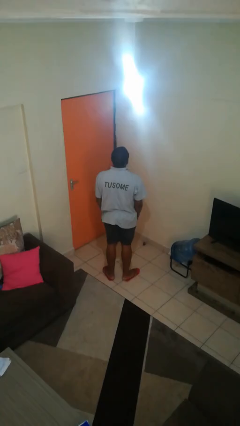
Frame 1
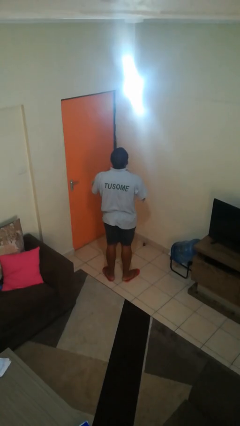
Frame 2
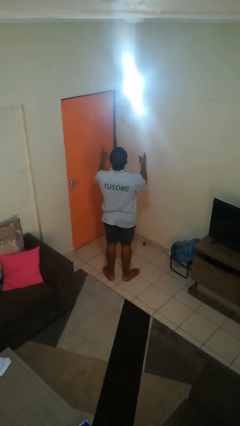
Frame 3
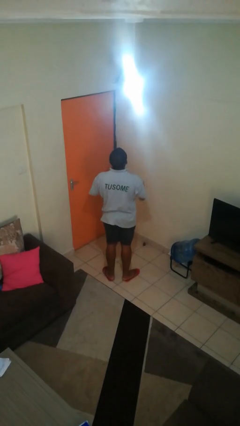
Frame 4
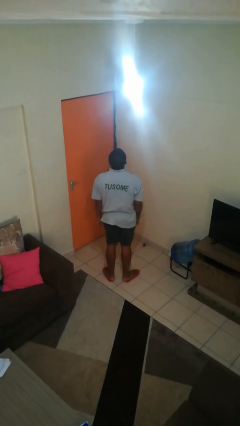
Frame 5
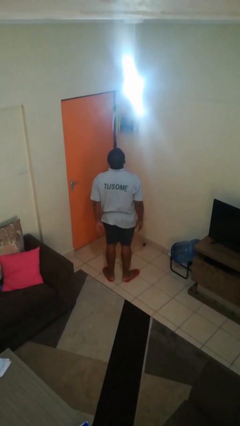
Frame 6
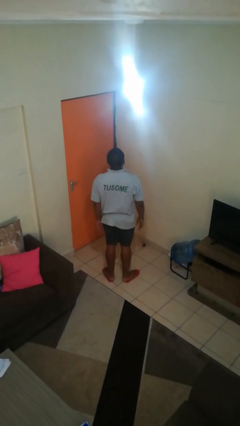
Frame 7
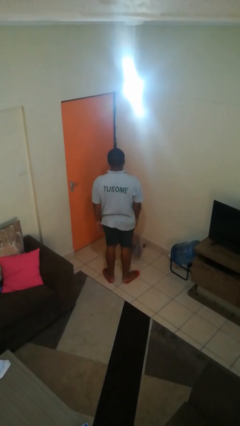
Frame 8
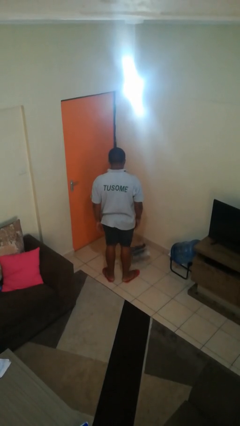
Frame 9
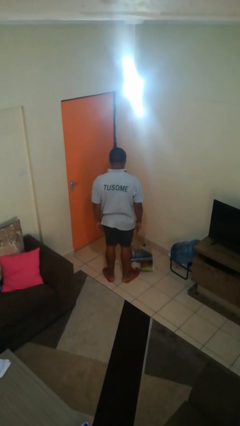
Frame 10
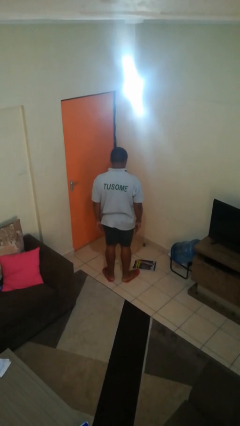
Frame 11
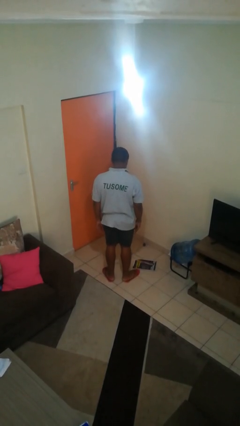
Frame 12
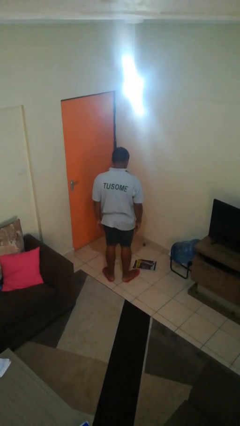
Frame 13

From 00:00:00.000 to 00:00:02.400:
person throws object into air

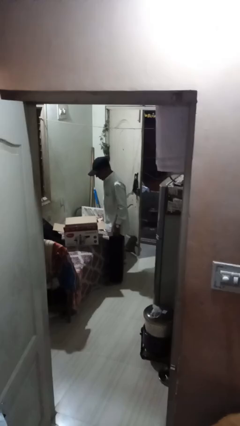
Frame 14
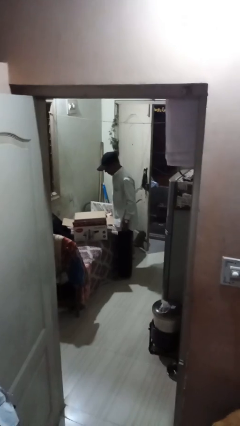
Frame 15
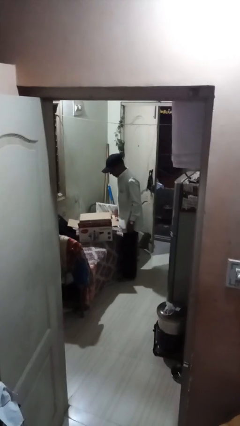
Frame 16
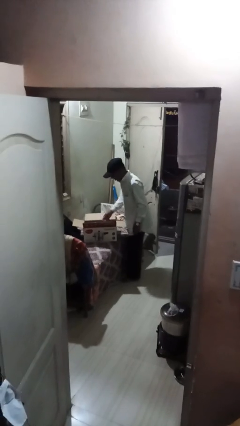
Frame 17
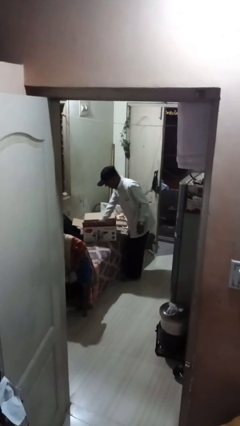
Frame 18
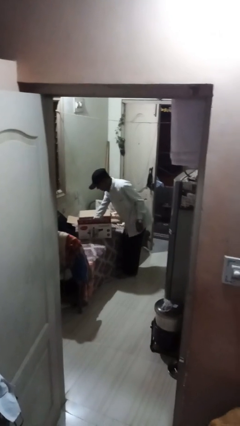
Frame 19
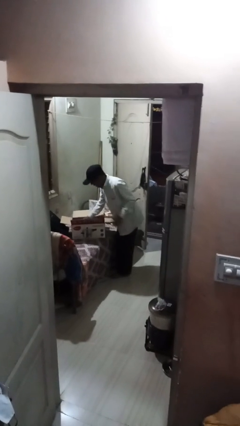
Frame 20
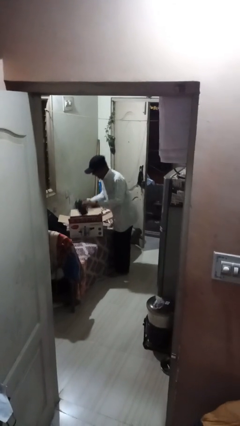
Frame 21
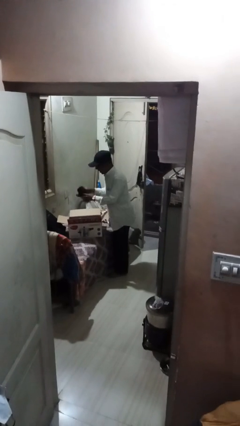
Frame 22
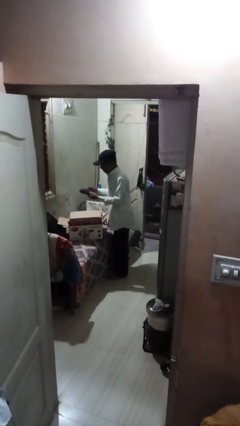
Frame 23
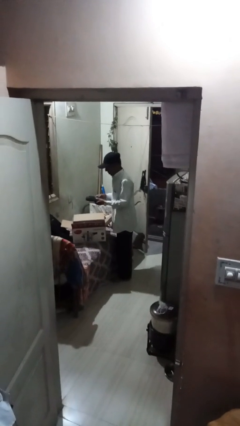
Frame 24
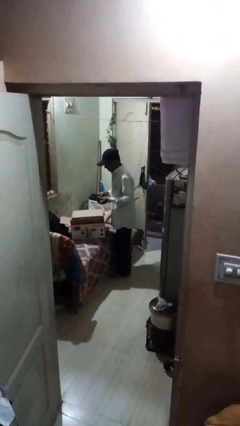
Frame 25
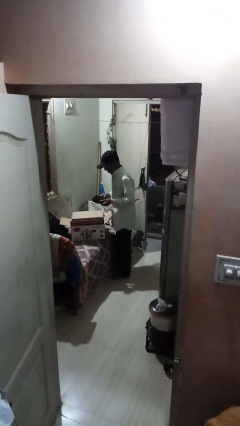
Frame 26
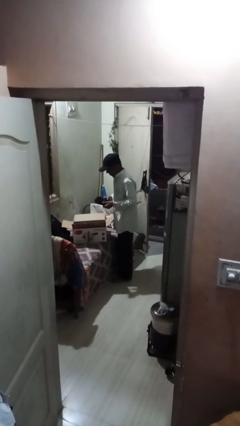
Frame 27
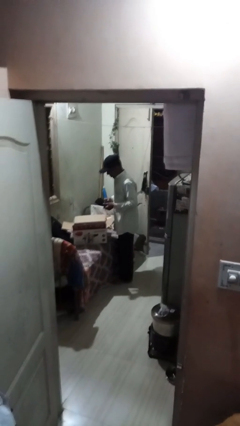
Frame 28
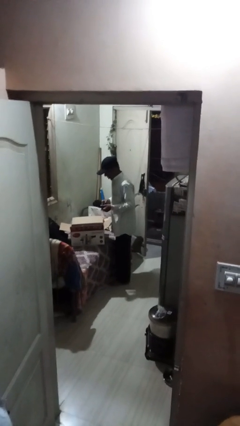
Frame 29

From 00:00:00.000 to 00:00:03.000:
person takes object from box

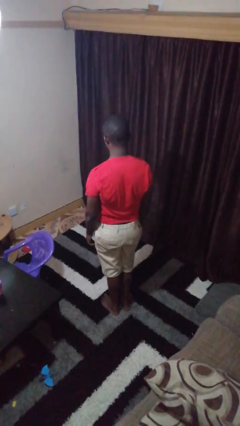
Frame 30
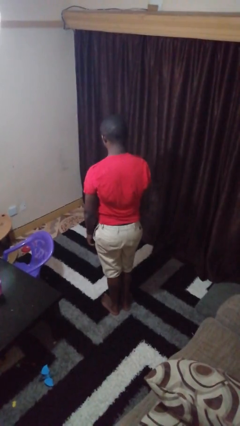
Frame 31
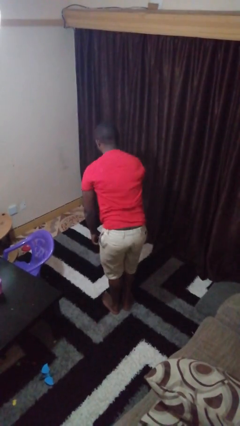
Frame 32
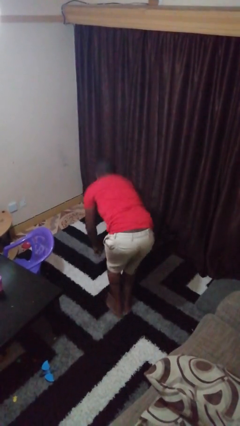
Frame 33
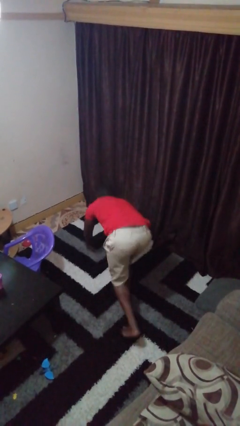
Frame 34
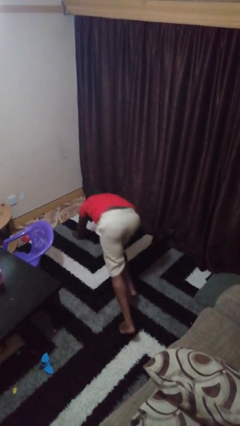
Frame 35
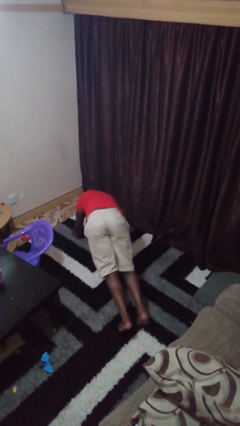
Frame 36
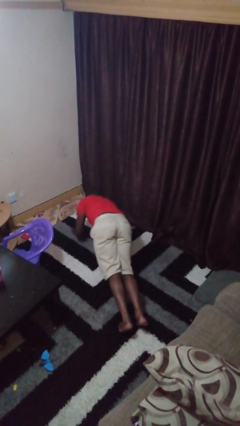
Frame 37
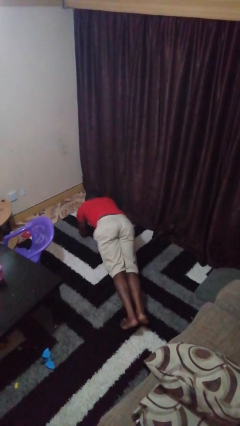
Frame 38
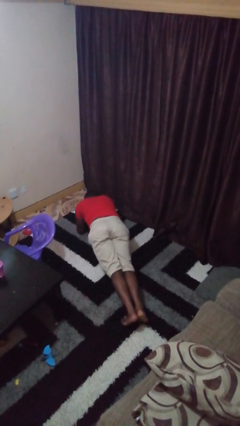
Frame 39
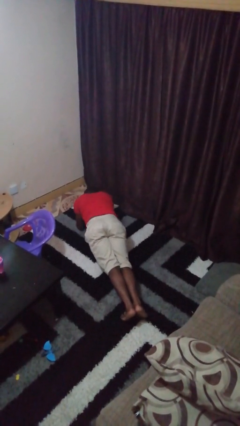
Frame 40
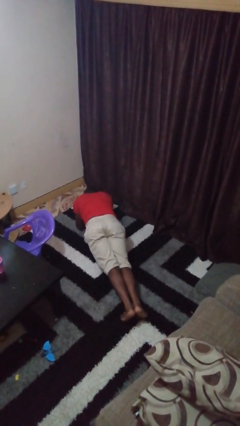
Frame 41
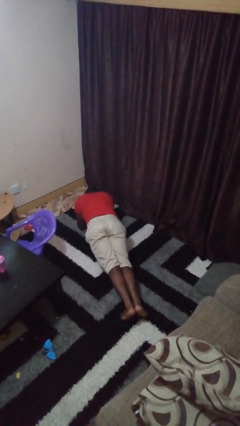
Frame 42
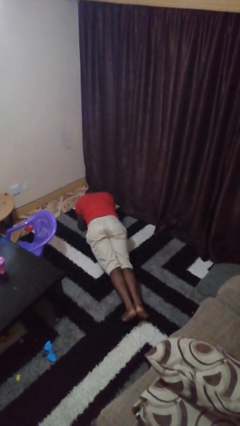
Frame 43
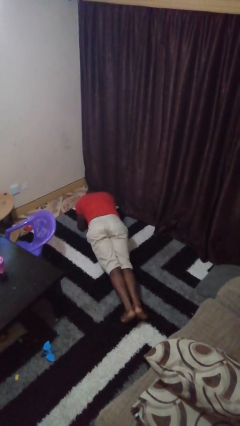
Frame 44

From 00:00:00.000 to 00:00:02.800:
person exercises with plank

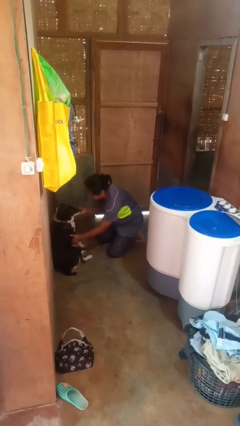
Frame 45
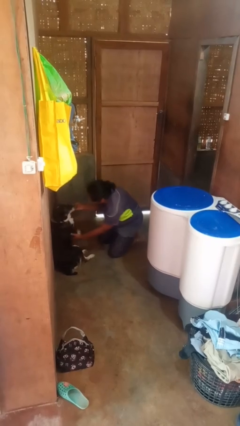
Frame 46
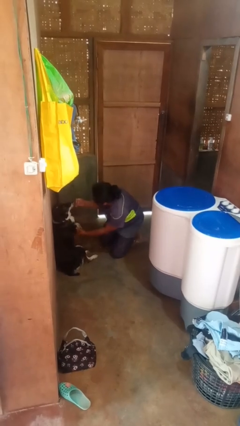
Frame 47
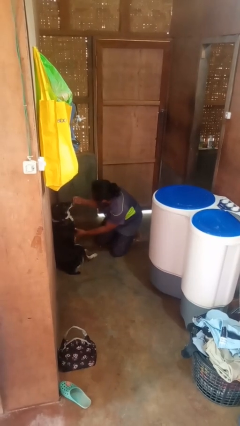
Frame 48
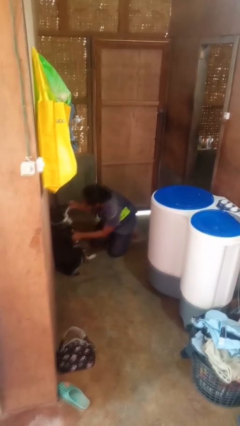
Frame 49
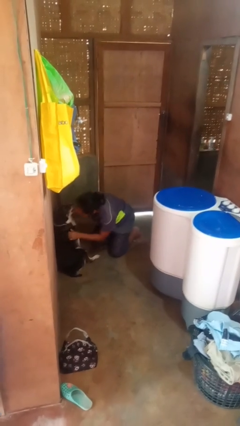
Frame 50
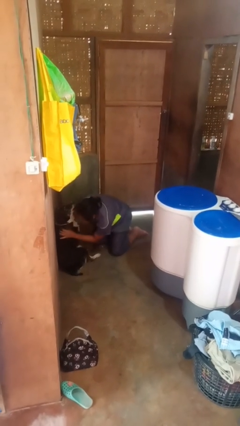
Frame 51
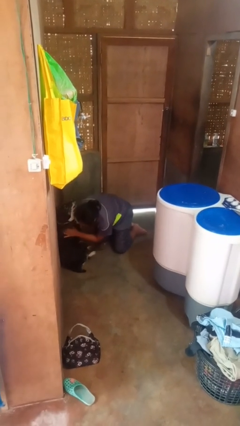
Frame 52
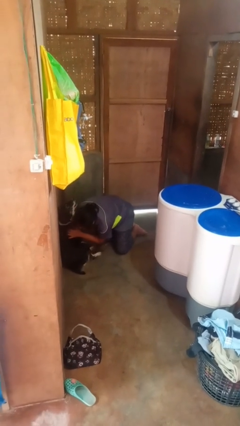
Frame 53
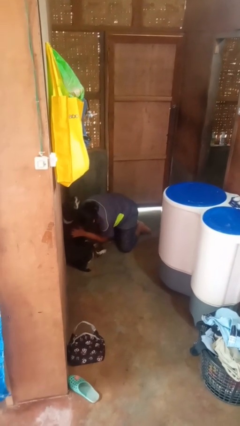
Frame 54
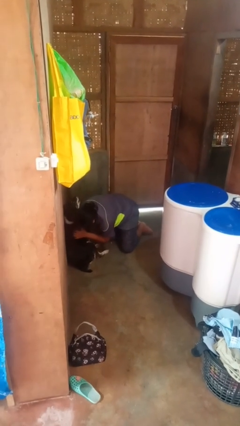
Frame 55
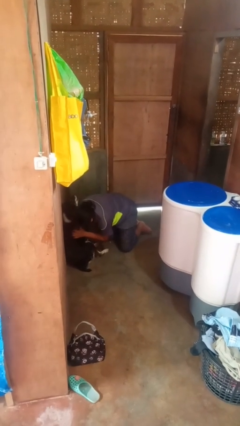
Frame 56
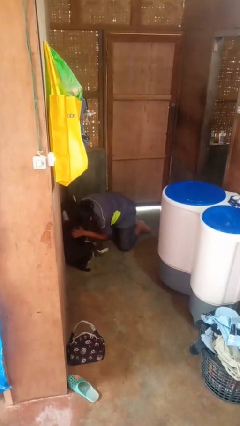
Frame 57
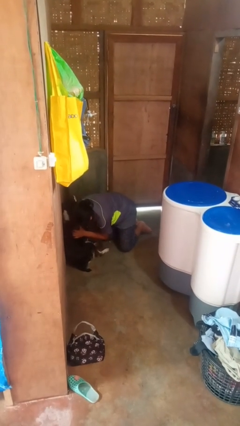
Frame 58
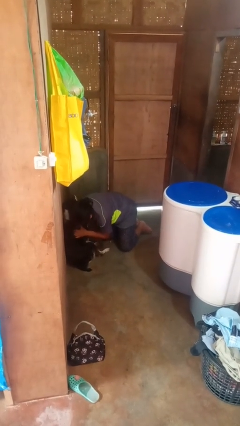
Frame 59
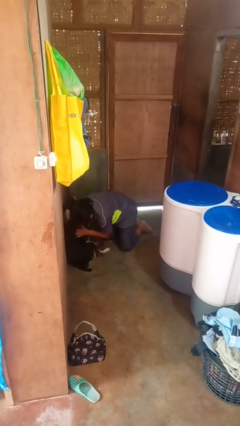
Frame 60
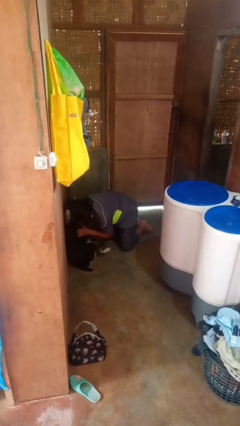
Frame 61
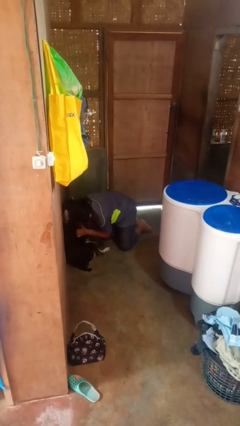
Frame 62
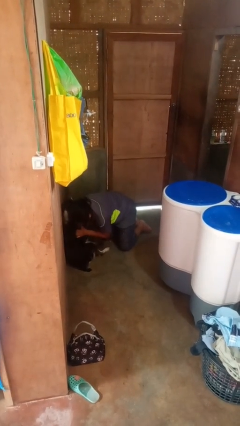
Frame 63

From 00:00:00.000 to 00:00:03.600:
person hugs cat

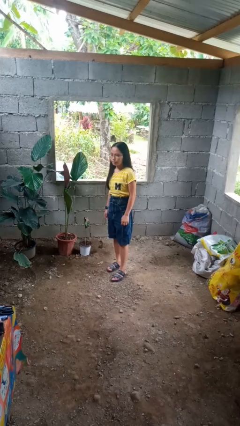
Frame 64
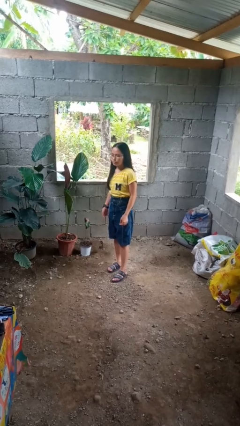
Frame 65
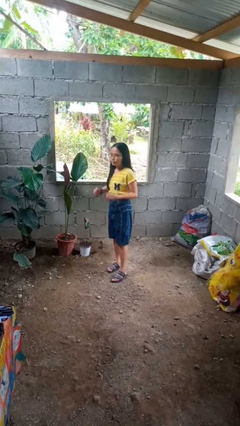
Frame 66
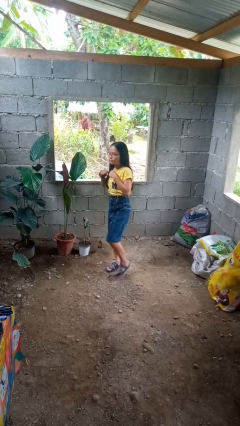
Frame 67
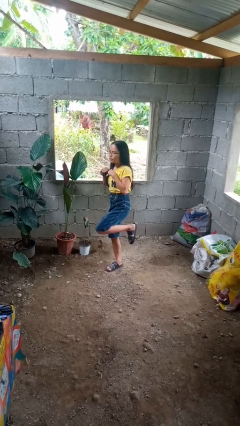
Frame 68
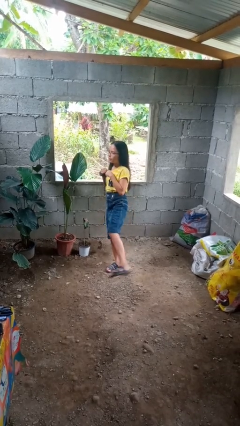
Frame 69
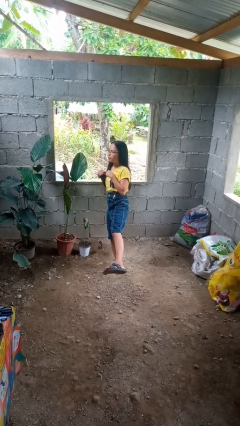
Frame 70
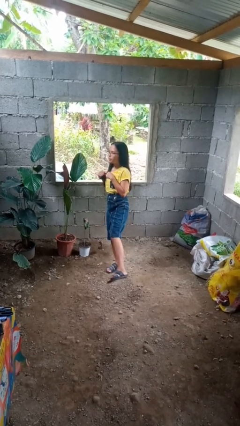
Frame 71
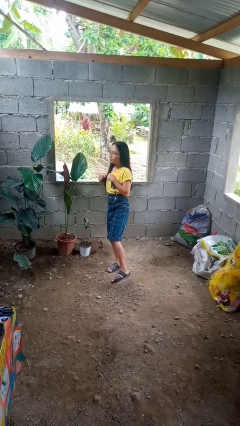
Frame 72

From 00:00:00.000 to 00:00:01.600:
person karate kicks

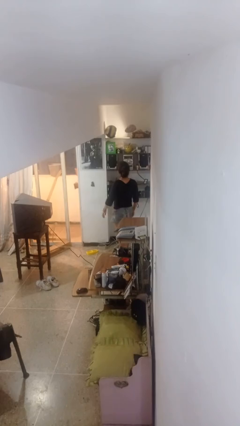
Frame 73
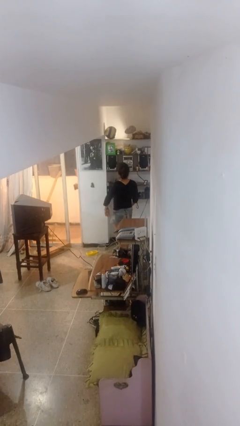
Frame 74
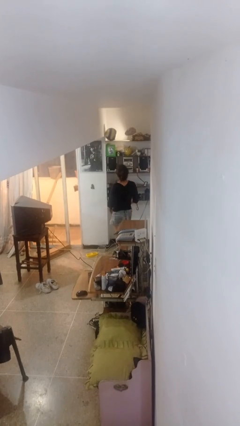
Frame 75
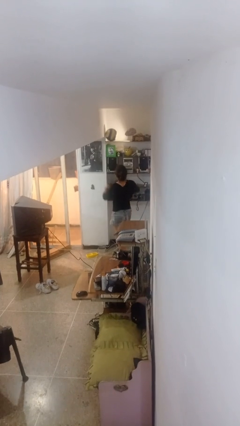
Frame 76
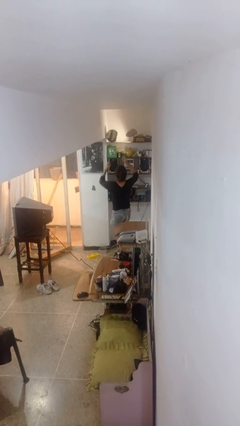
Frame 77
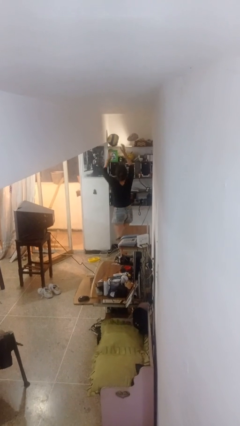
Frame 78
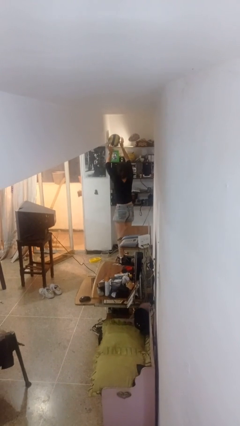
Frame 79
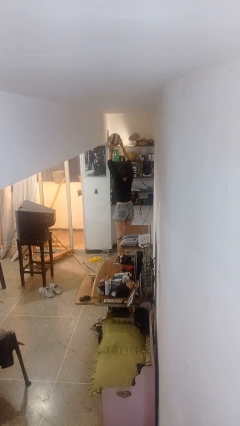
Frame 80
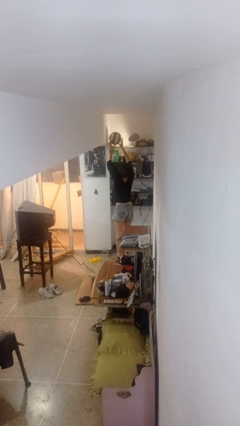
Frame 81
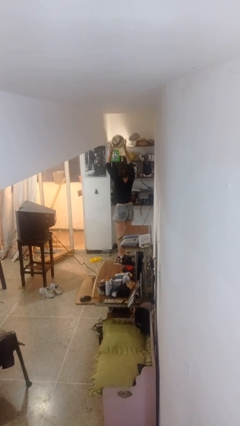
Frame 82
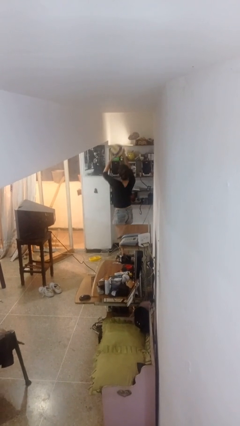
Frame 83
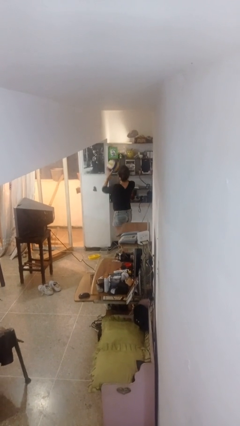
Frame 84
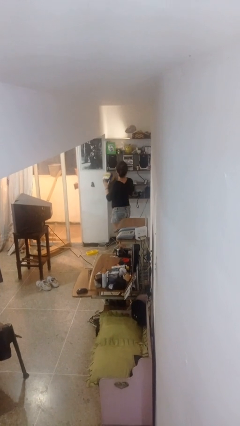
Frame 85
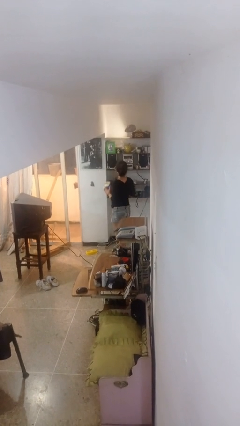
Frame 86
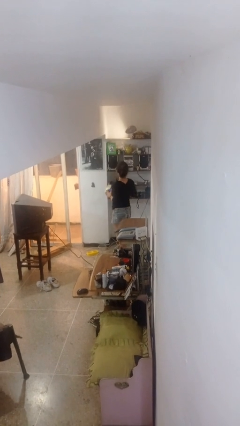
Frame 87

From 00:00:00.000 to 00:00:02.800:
person picks up object from shelf

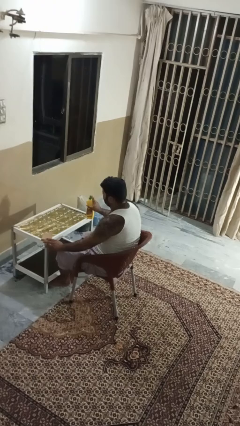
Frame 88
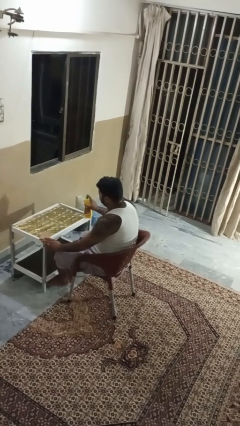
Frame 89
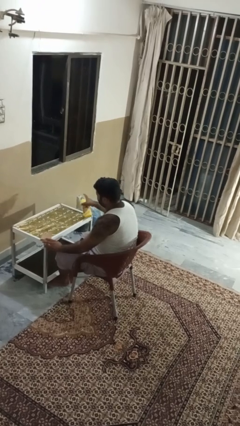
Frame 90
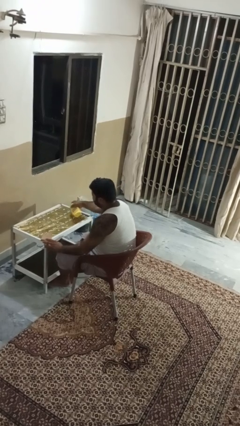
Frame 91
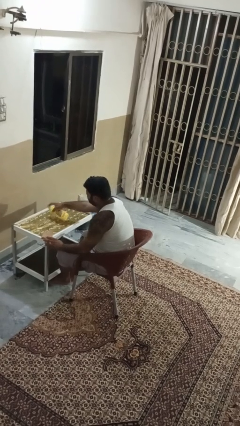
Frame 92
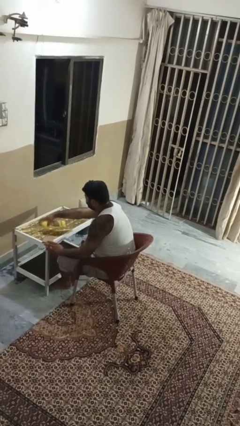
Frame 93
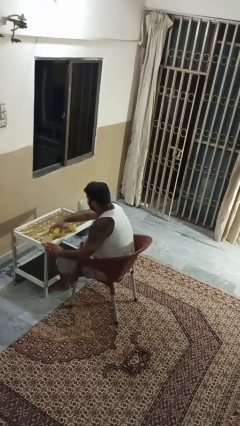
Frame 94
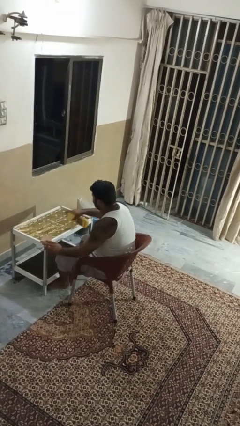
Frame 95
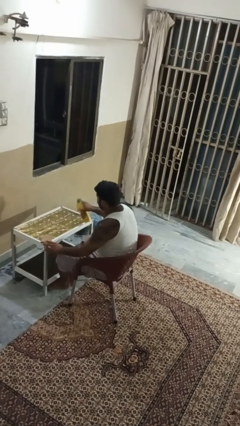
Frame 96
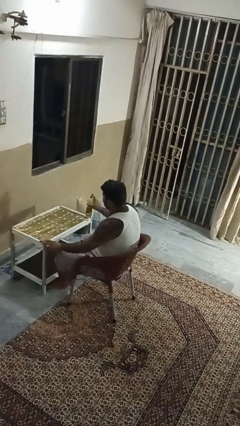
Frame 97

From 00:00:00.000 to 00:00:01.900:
person sprays from bottle
